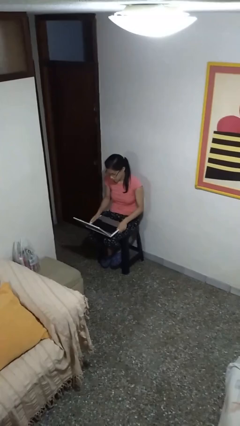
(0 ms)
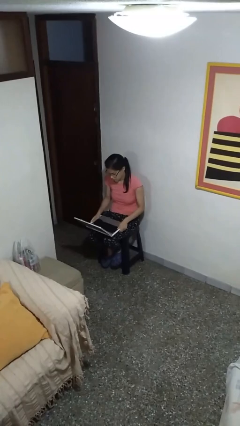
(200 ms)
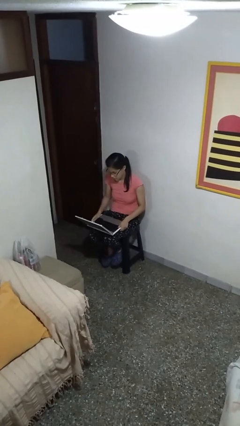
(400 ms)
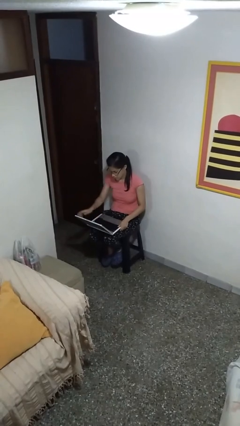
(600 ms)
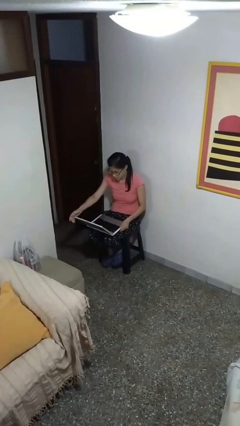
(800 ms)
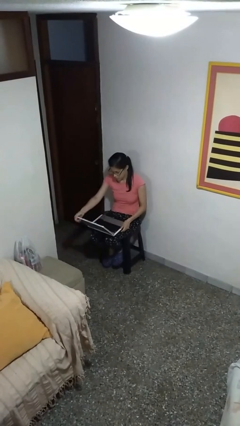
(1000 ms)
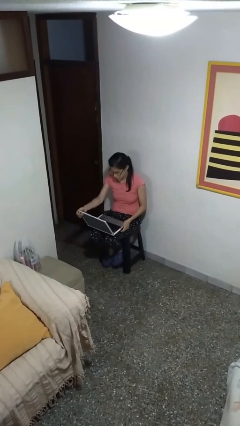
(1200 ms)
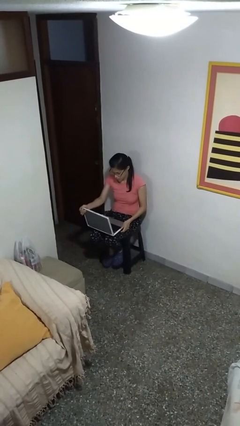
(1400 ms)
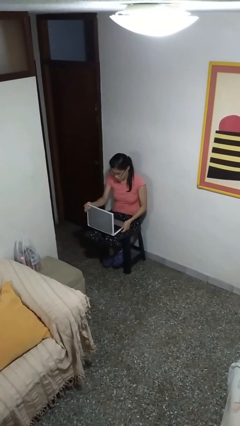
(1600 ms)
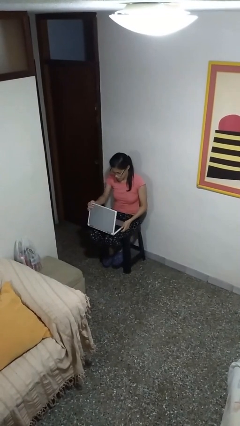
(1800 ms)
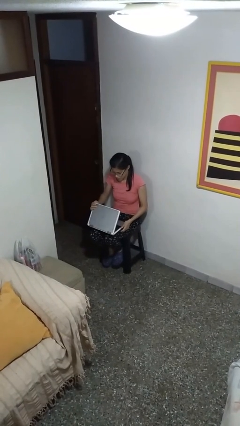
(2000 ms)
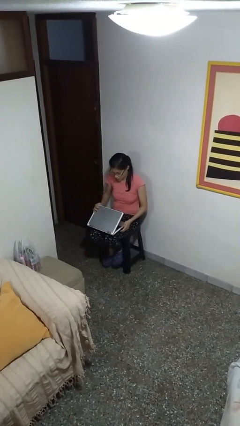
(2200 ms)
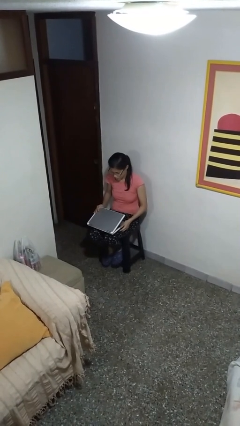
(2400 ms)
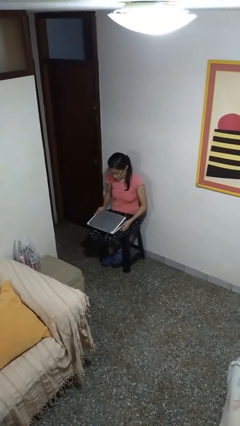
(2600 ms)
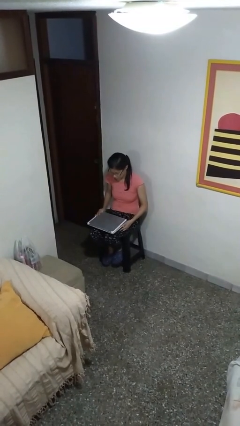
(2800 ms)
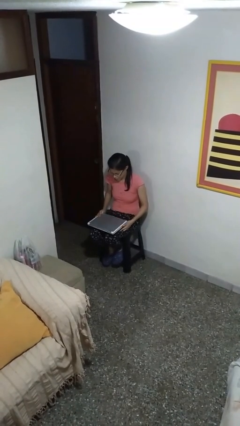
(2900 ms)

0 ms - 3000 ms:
person closes laptop

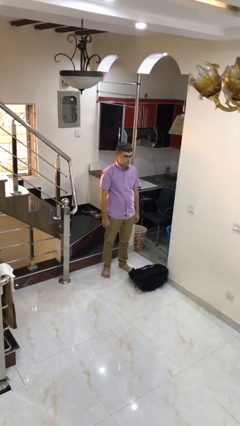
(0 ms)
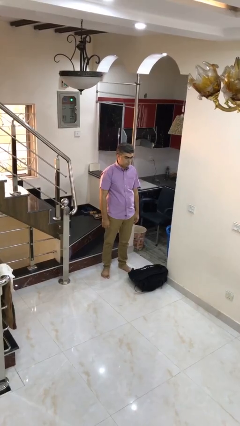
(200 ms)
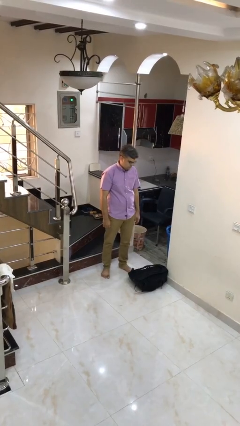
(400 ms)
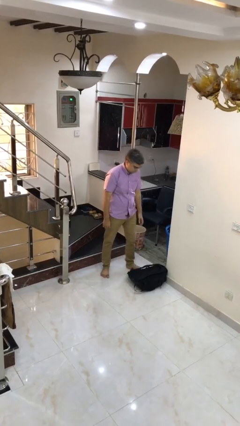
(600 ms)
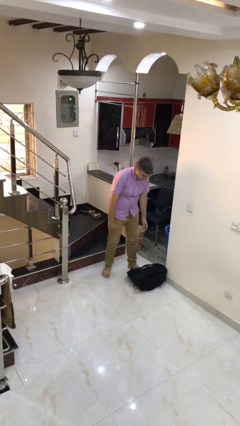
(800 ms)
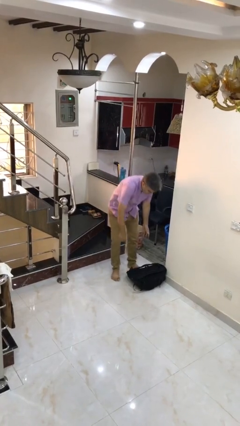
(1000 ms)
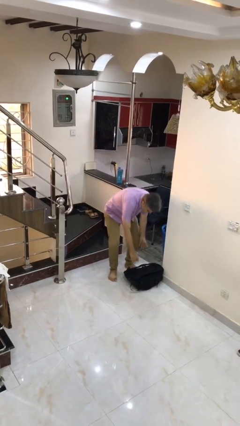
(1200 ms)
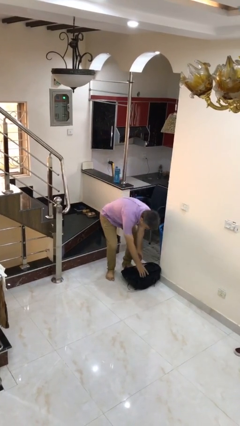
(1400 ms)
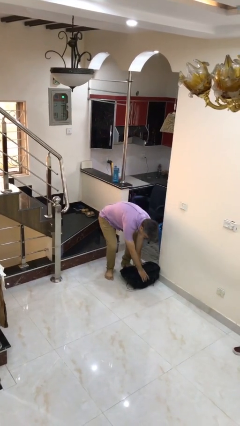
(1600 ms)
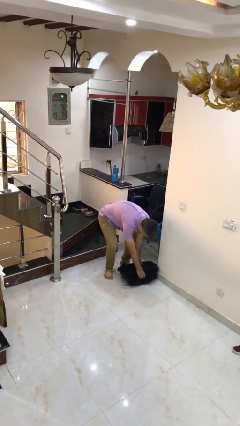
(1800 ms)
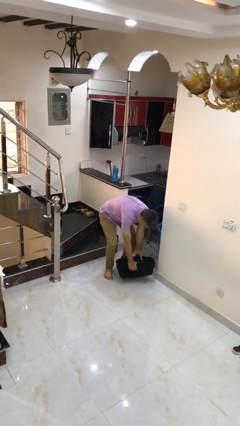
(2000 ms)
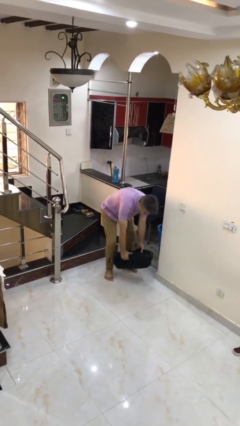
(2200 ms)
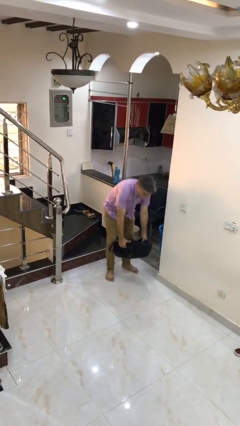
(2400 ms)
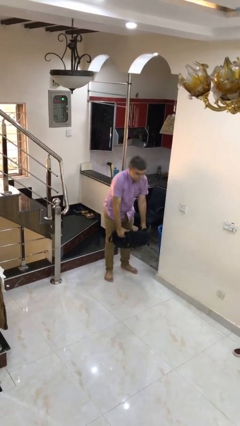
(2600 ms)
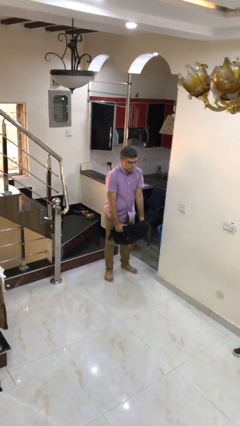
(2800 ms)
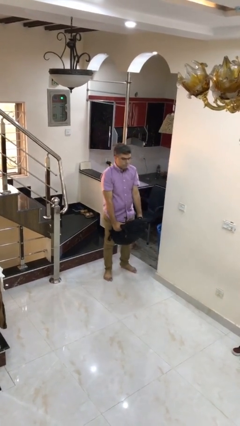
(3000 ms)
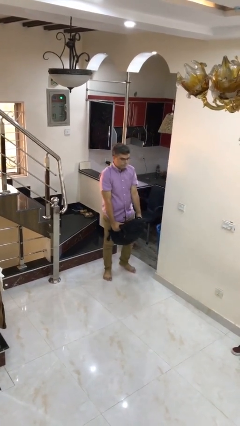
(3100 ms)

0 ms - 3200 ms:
person picks up object from floor

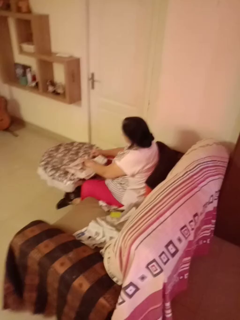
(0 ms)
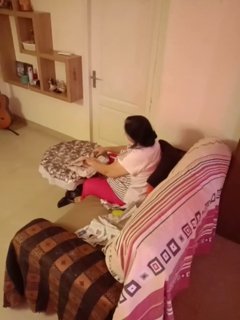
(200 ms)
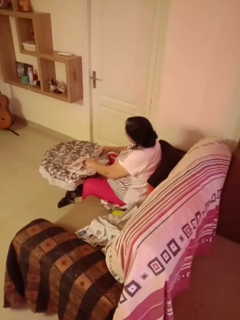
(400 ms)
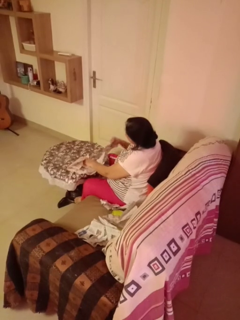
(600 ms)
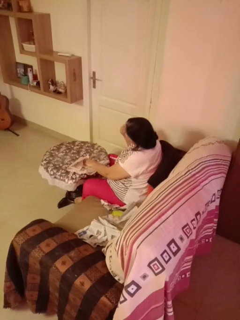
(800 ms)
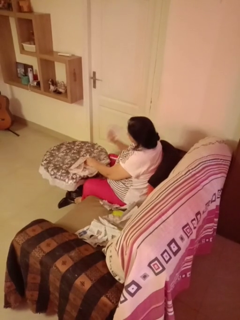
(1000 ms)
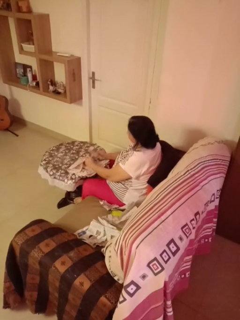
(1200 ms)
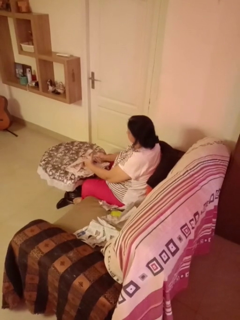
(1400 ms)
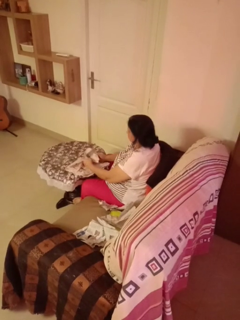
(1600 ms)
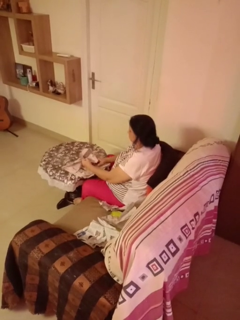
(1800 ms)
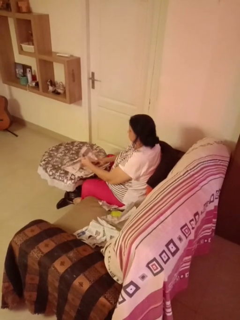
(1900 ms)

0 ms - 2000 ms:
person tears paper

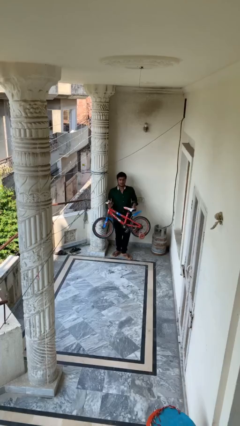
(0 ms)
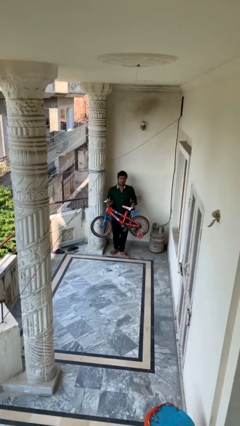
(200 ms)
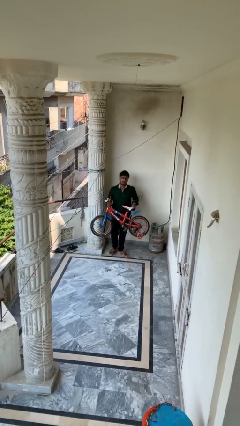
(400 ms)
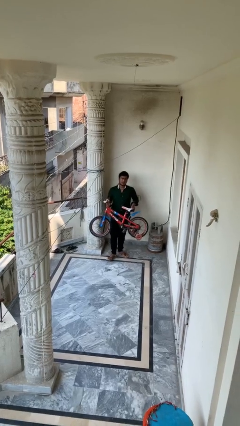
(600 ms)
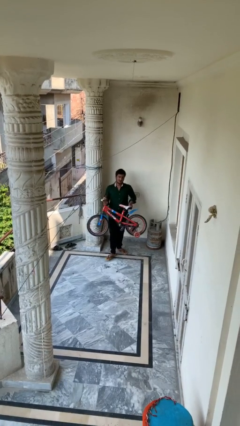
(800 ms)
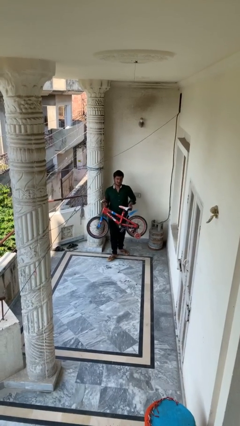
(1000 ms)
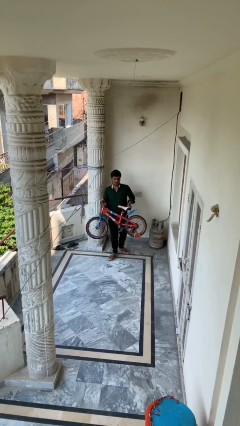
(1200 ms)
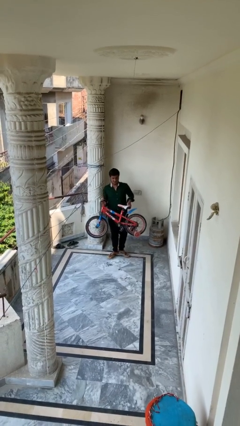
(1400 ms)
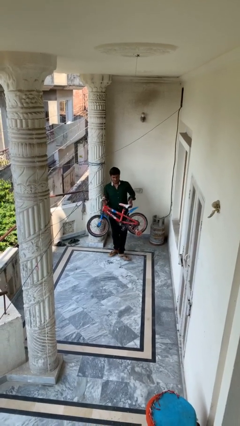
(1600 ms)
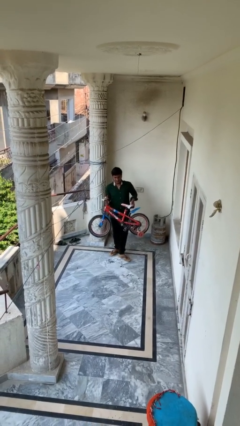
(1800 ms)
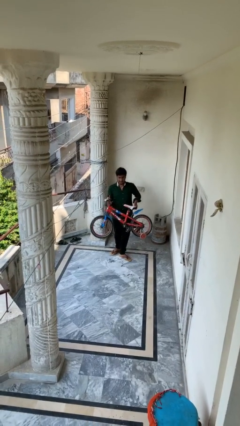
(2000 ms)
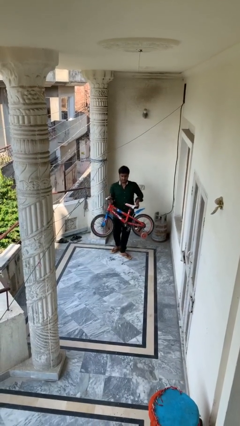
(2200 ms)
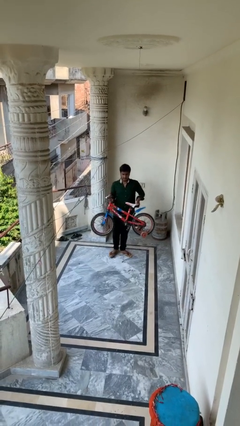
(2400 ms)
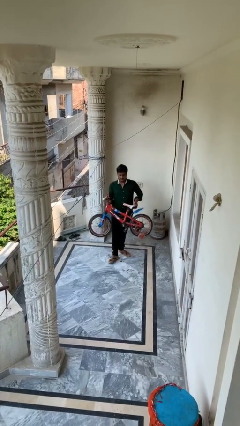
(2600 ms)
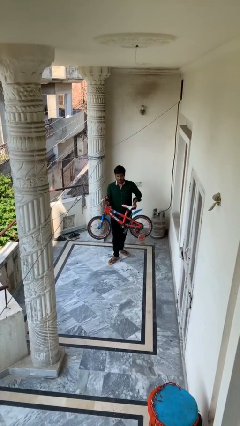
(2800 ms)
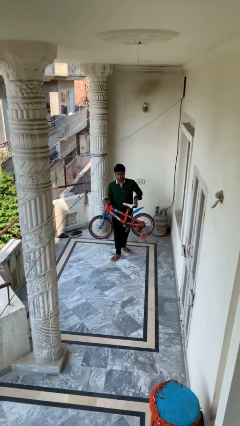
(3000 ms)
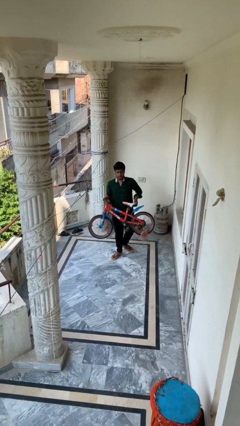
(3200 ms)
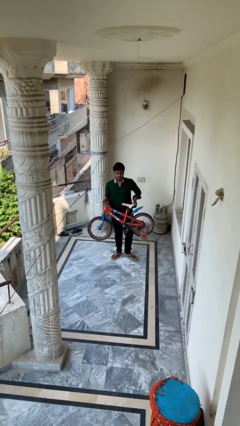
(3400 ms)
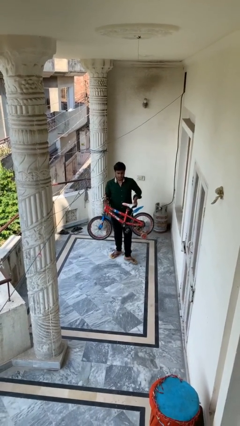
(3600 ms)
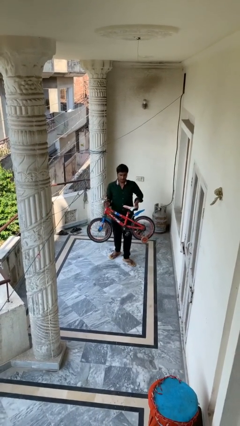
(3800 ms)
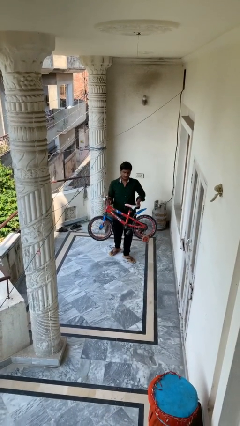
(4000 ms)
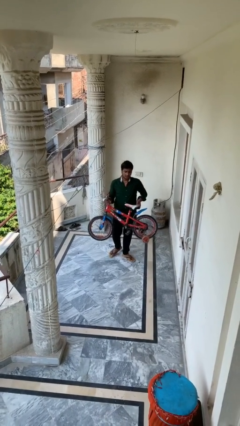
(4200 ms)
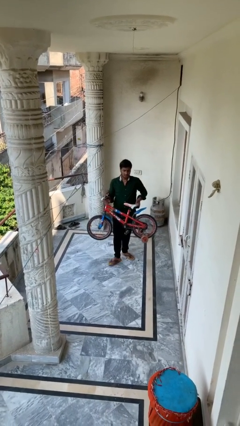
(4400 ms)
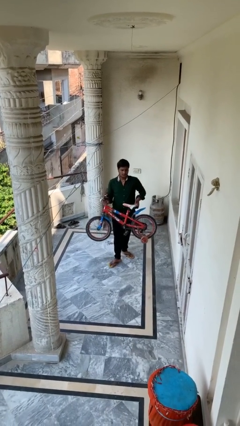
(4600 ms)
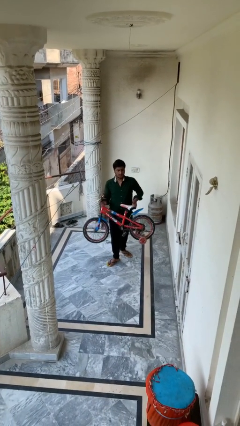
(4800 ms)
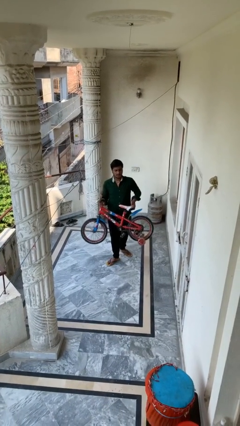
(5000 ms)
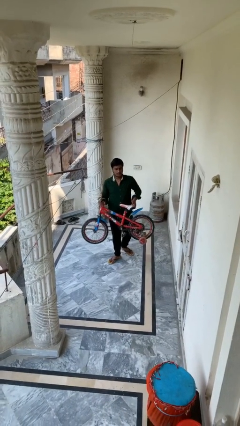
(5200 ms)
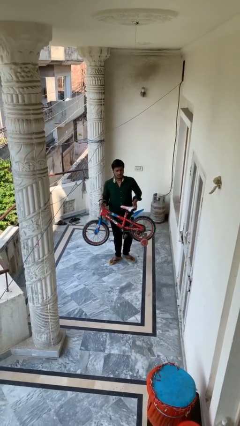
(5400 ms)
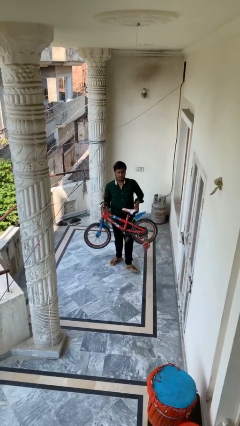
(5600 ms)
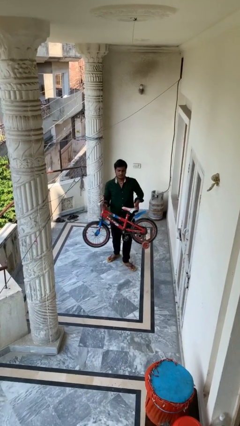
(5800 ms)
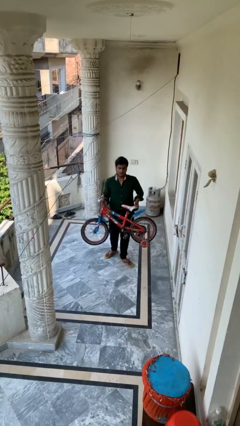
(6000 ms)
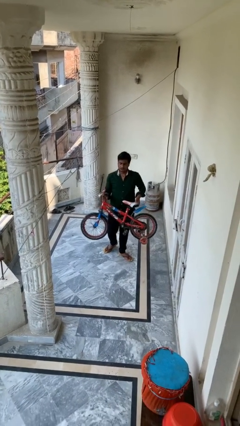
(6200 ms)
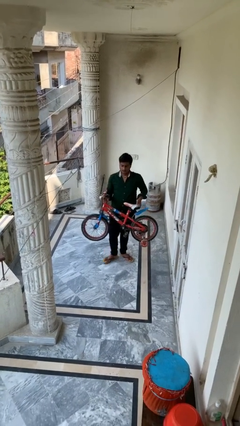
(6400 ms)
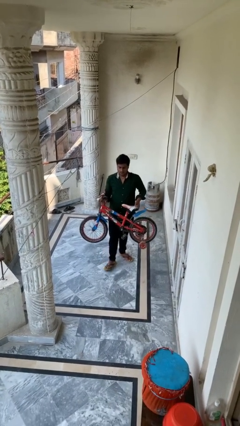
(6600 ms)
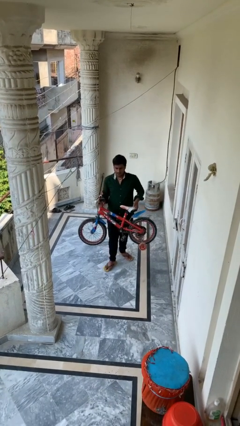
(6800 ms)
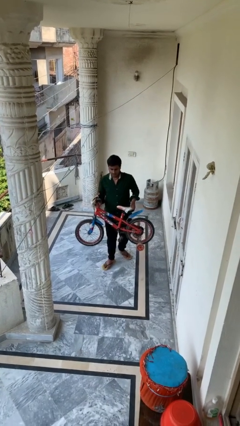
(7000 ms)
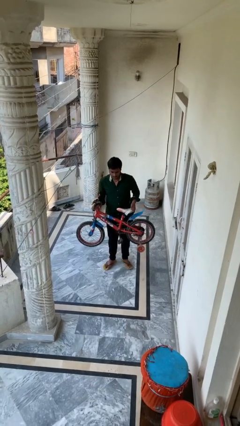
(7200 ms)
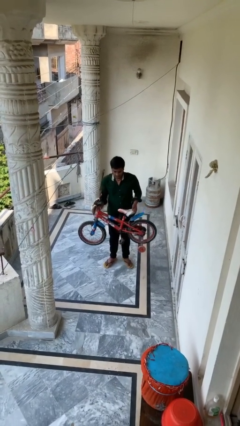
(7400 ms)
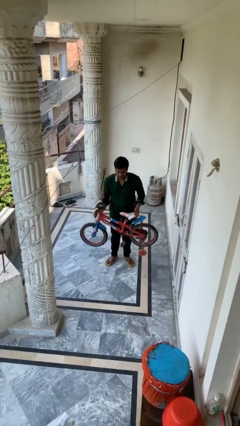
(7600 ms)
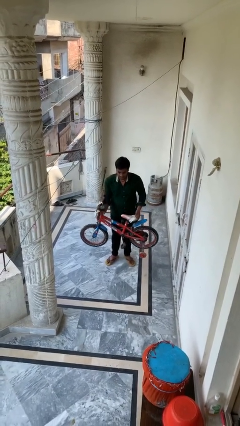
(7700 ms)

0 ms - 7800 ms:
person carries heavy object

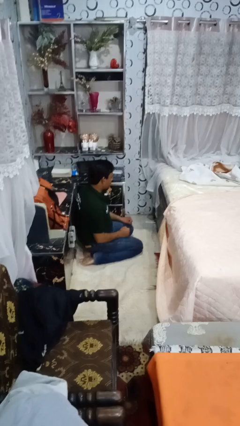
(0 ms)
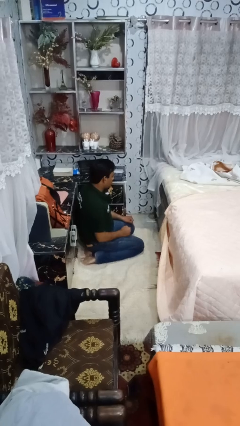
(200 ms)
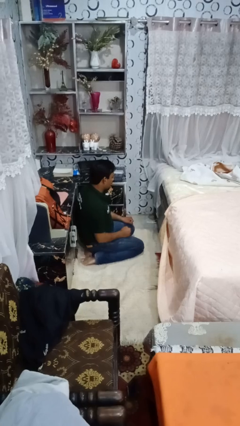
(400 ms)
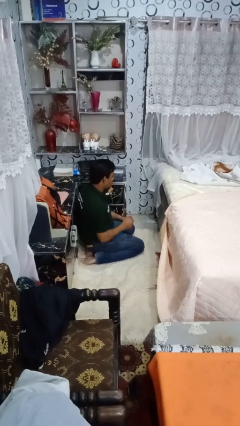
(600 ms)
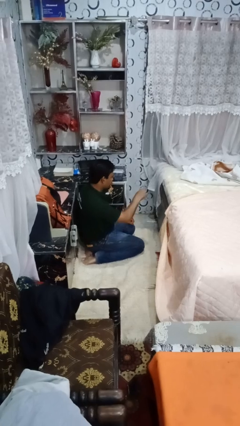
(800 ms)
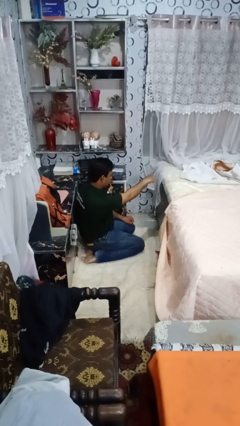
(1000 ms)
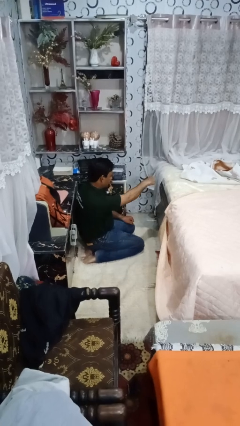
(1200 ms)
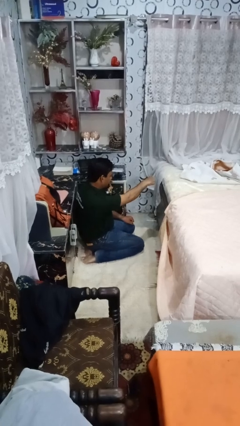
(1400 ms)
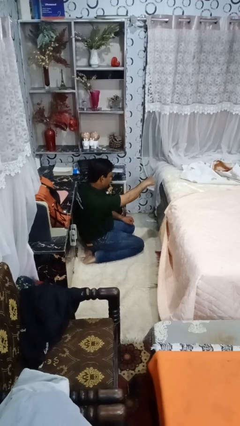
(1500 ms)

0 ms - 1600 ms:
person punches

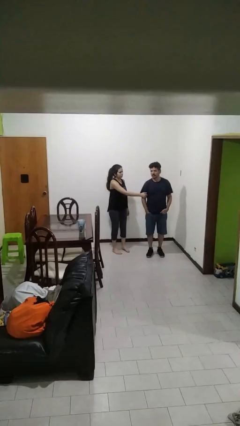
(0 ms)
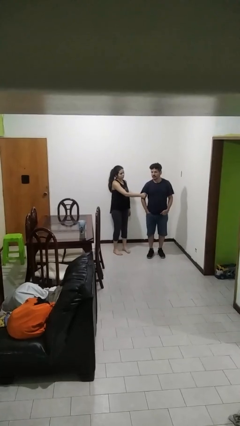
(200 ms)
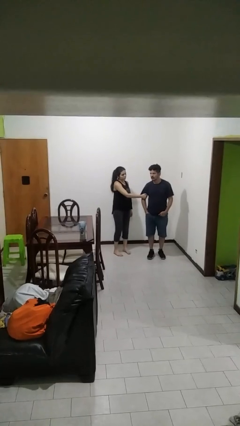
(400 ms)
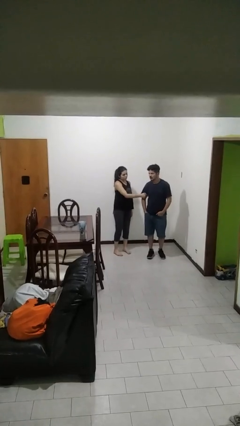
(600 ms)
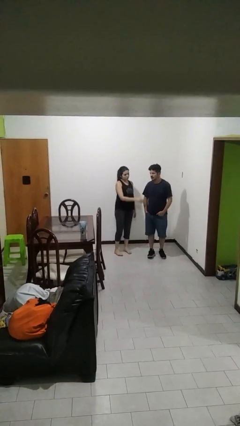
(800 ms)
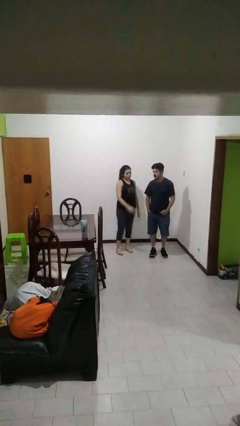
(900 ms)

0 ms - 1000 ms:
person grabs person by bicep
